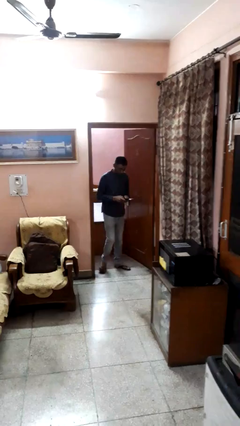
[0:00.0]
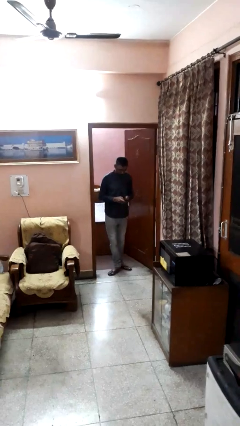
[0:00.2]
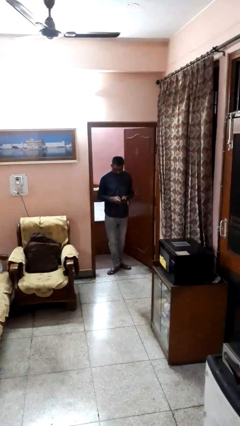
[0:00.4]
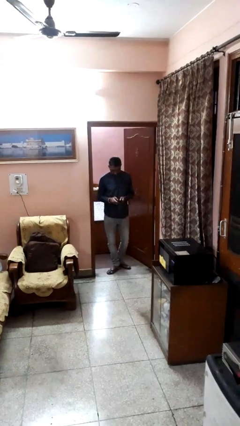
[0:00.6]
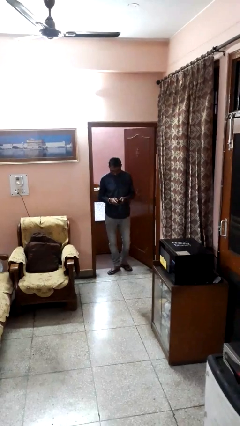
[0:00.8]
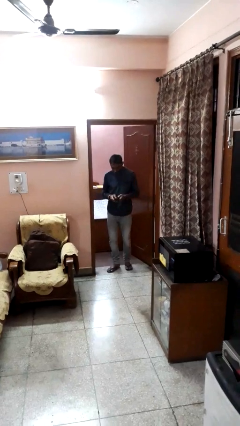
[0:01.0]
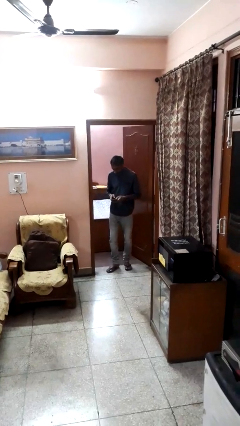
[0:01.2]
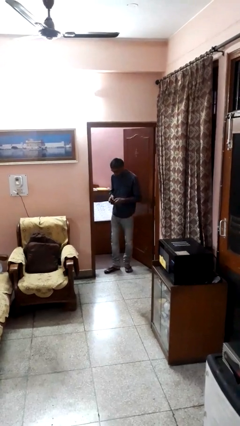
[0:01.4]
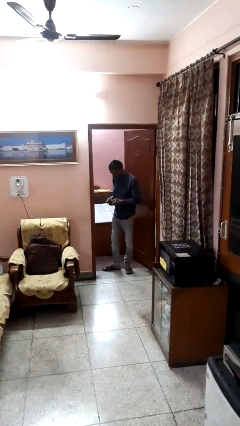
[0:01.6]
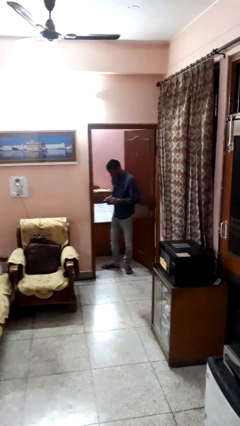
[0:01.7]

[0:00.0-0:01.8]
person enters scene through structure

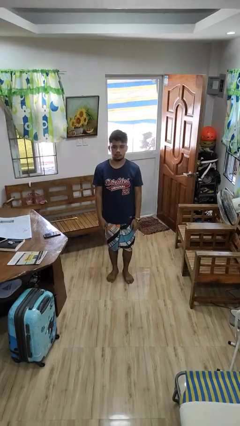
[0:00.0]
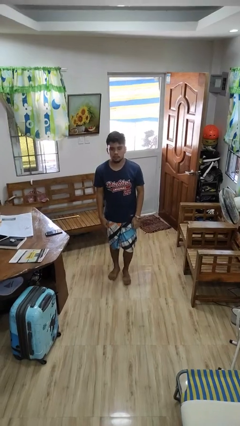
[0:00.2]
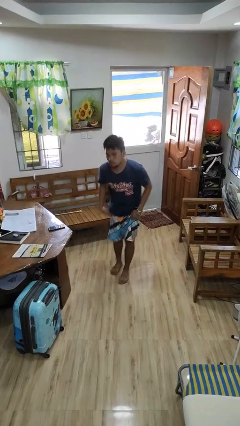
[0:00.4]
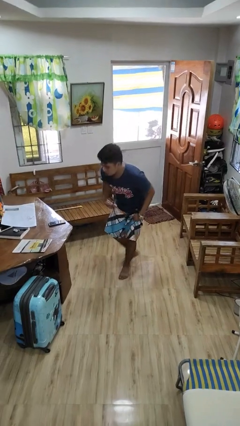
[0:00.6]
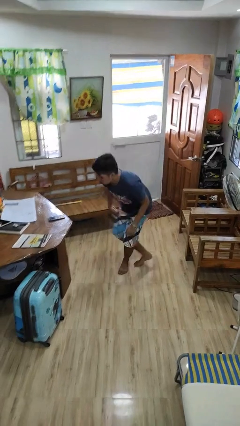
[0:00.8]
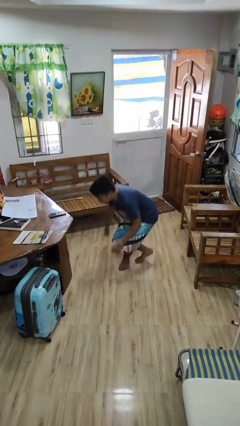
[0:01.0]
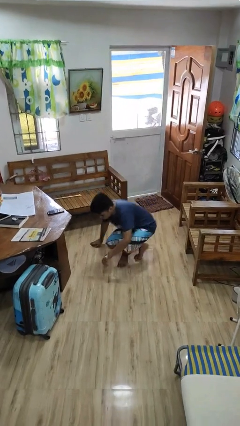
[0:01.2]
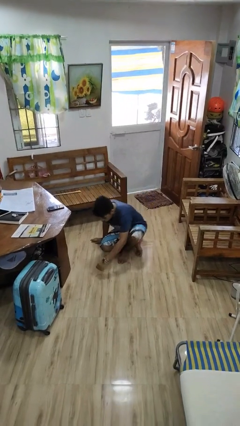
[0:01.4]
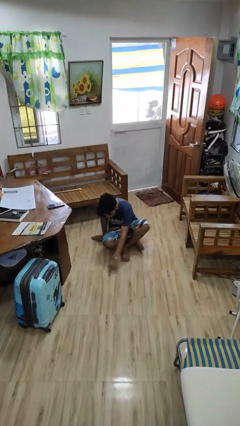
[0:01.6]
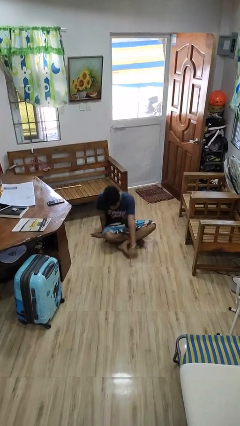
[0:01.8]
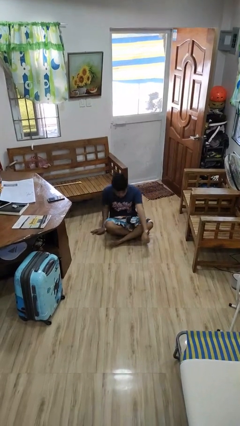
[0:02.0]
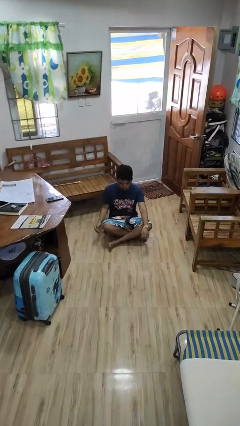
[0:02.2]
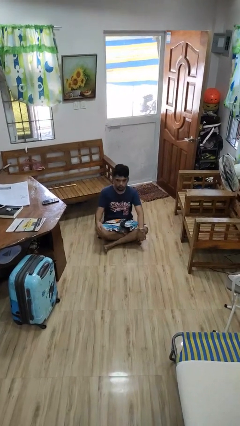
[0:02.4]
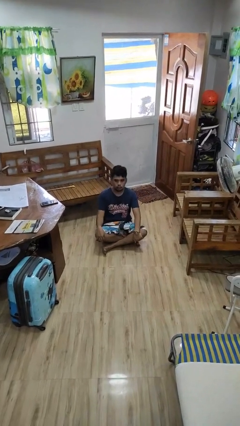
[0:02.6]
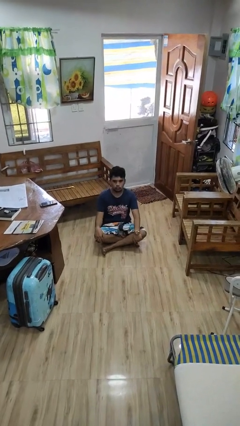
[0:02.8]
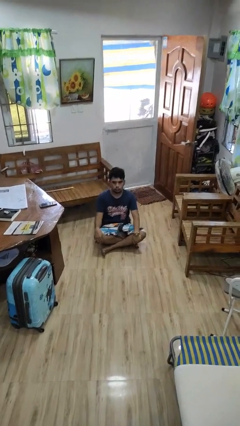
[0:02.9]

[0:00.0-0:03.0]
person sits crisscross

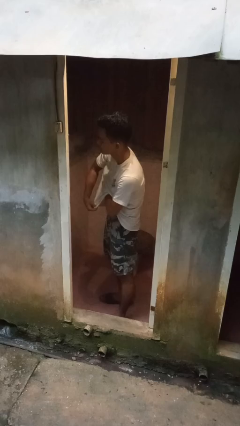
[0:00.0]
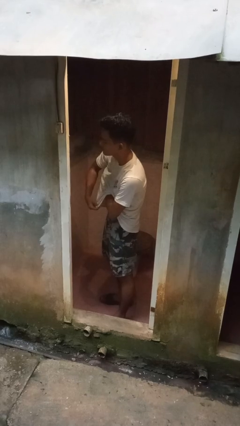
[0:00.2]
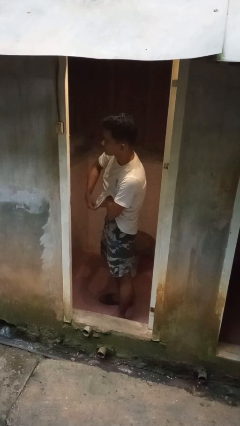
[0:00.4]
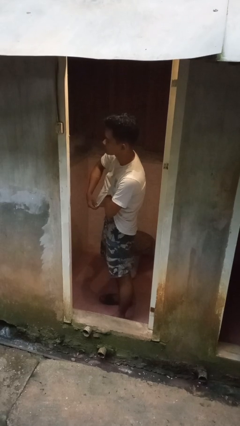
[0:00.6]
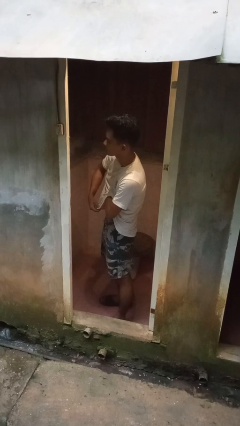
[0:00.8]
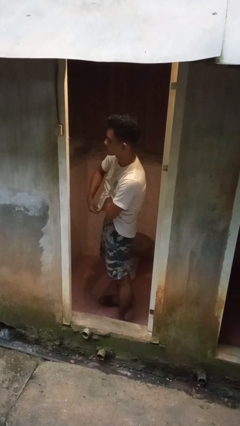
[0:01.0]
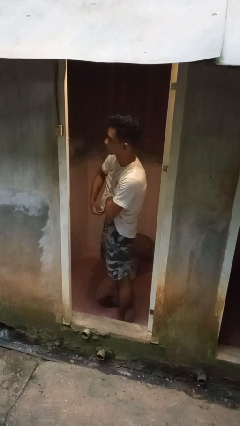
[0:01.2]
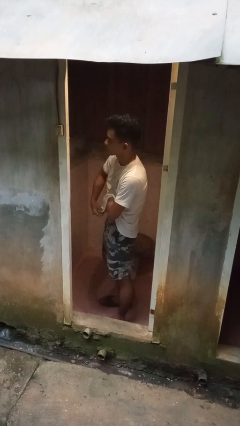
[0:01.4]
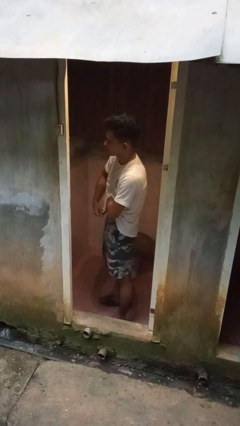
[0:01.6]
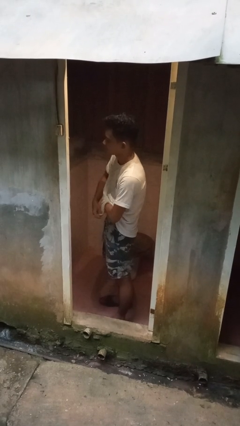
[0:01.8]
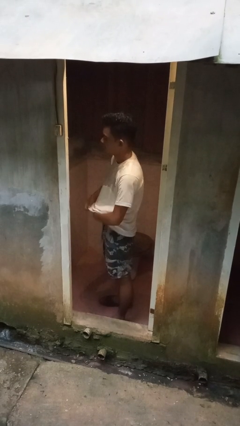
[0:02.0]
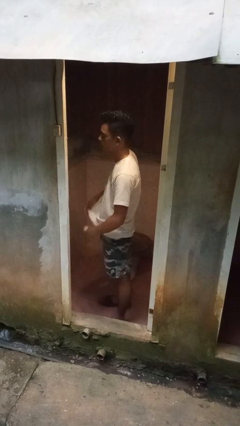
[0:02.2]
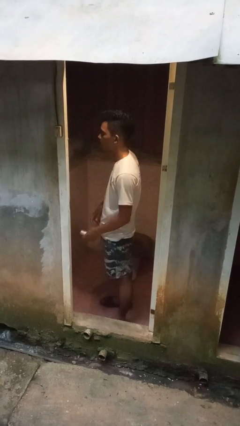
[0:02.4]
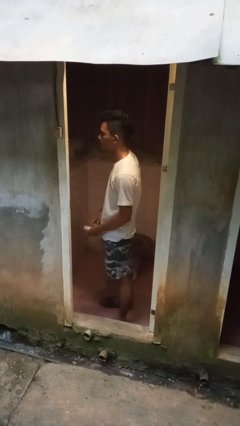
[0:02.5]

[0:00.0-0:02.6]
person applies deodorant

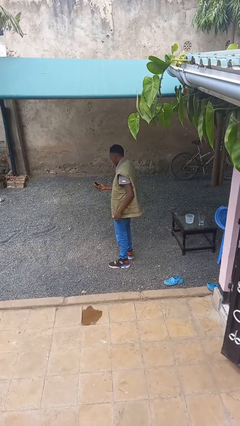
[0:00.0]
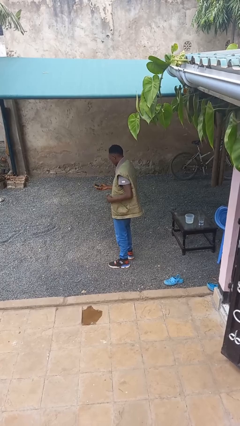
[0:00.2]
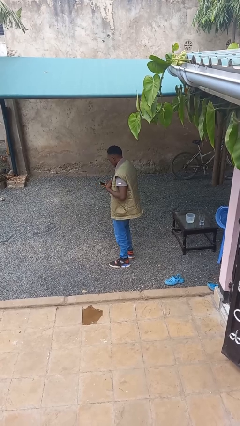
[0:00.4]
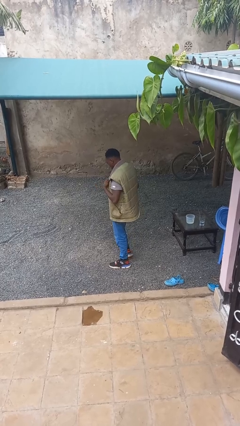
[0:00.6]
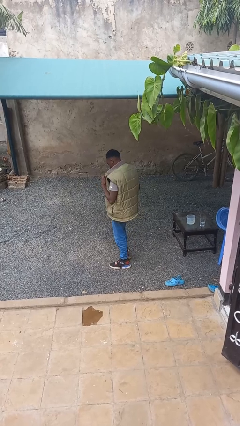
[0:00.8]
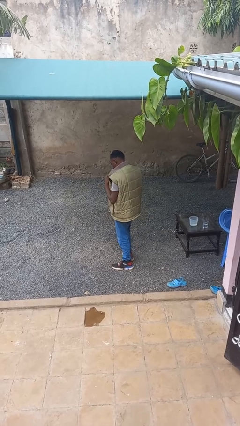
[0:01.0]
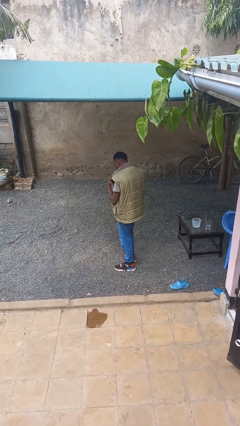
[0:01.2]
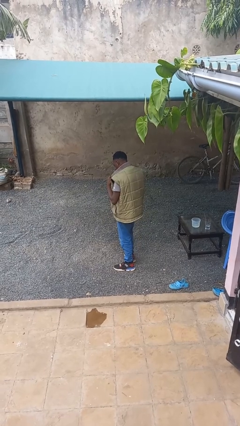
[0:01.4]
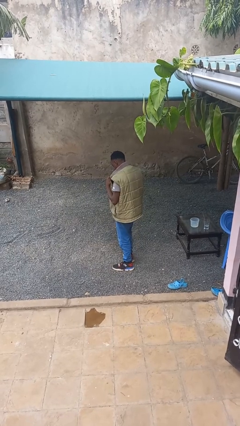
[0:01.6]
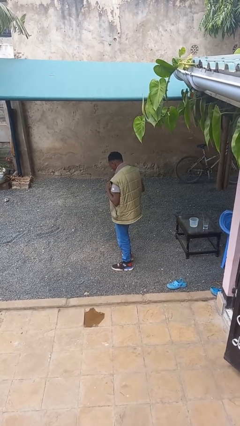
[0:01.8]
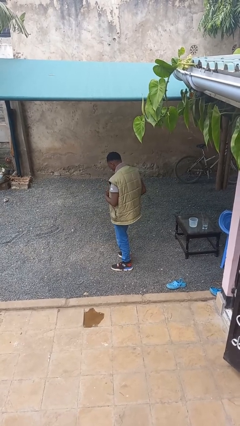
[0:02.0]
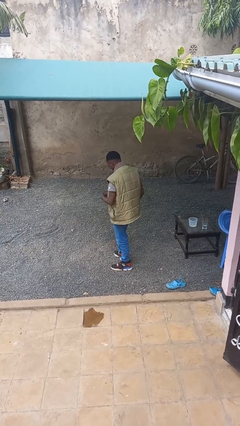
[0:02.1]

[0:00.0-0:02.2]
person puts phone into pocket

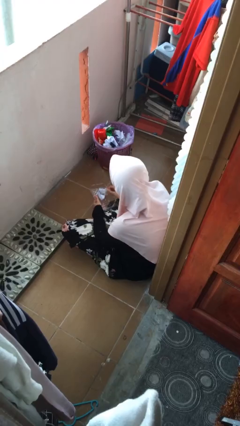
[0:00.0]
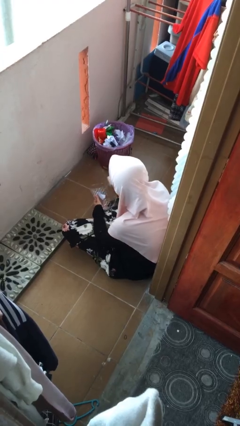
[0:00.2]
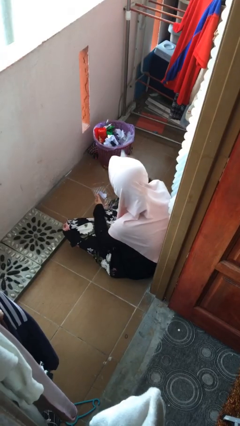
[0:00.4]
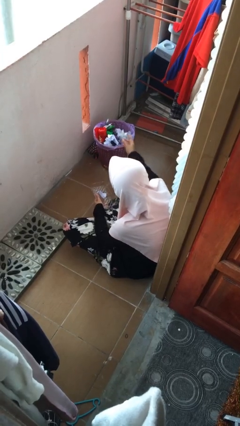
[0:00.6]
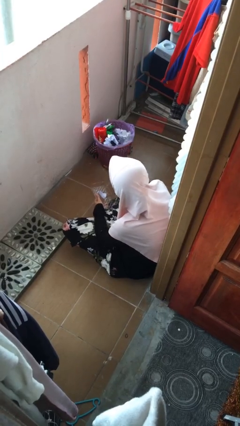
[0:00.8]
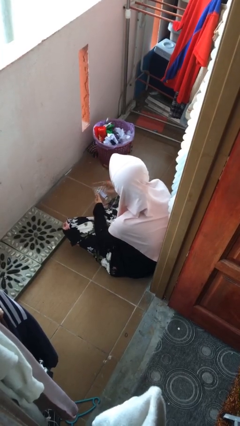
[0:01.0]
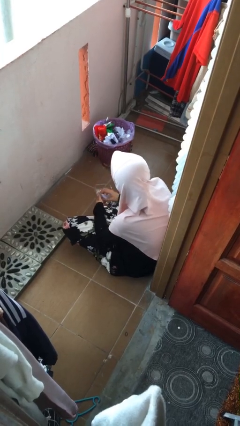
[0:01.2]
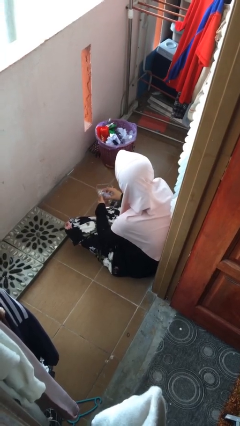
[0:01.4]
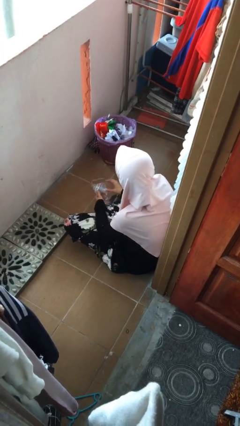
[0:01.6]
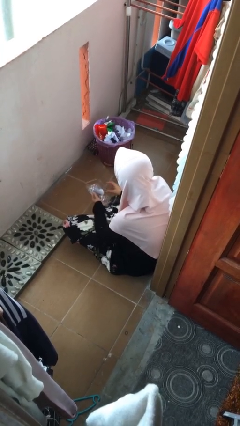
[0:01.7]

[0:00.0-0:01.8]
person discards trash

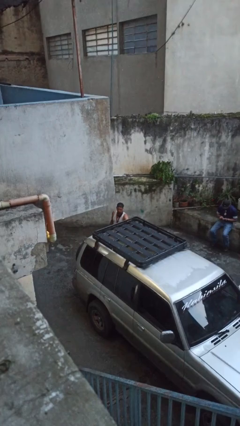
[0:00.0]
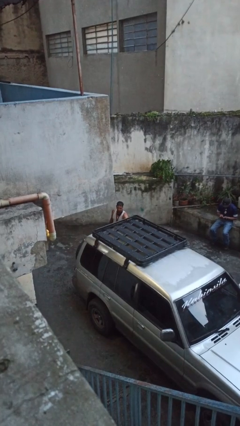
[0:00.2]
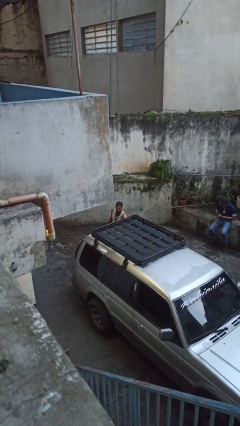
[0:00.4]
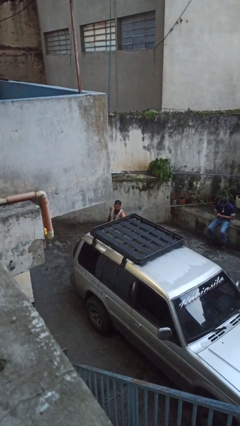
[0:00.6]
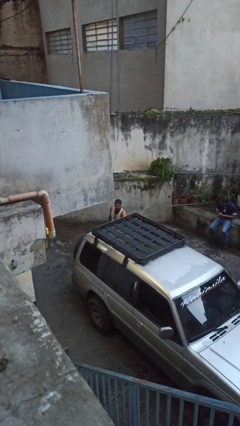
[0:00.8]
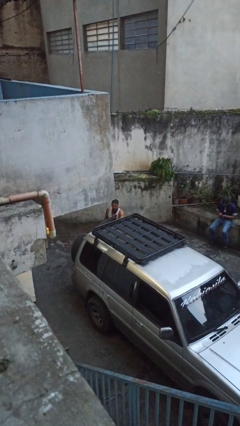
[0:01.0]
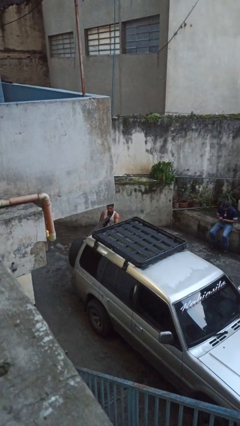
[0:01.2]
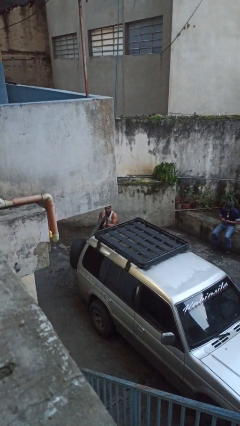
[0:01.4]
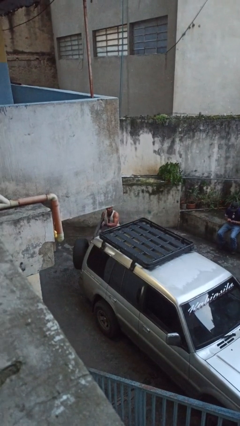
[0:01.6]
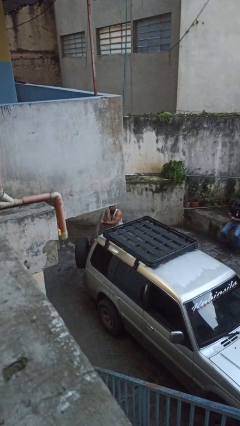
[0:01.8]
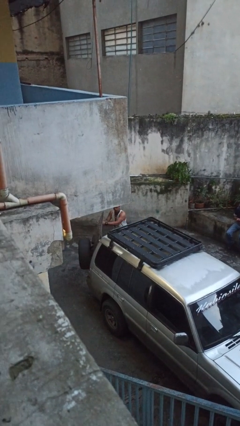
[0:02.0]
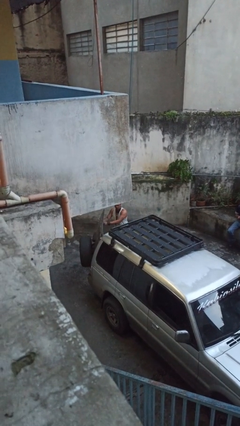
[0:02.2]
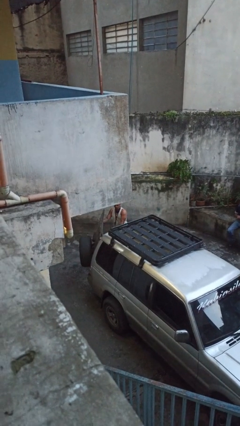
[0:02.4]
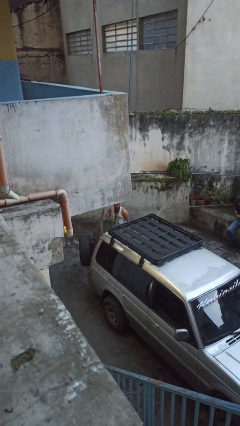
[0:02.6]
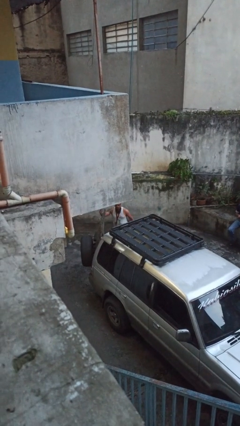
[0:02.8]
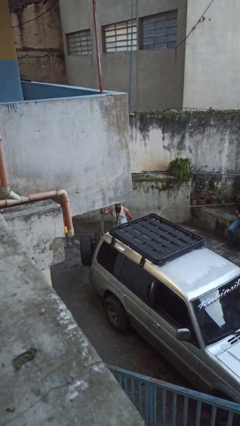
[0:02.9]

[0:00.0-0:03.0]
person opens car trunk

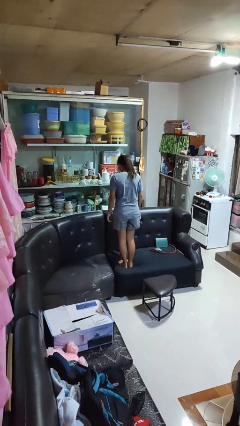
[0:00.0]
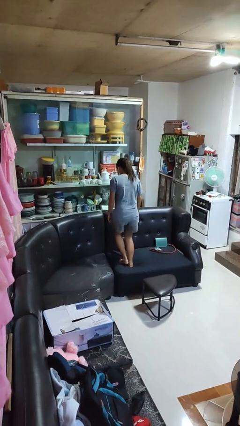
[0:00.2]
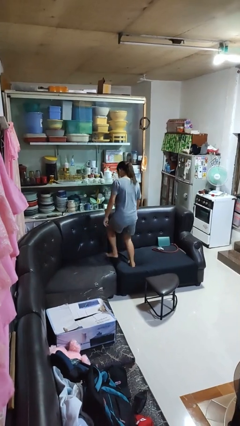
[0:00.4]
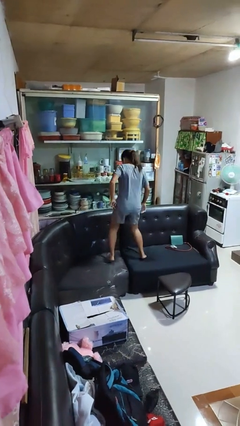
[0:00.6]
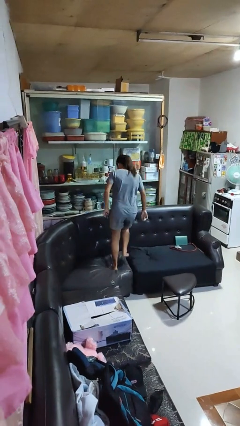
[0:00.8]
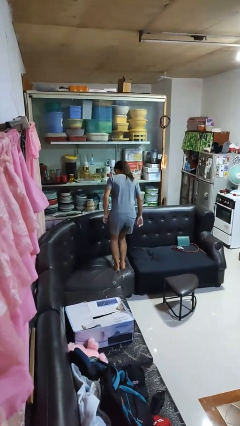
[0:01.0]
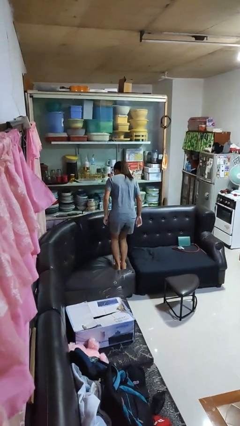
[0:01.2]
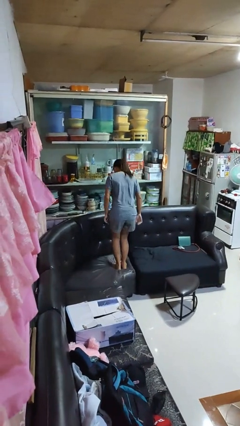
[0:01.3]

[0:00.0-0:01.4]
person jumps on couch

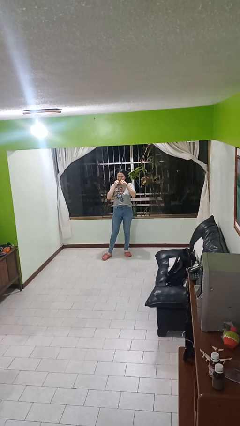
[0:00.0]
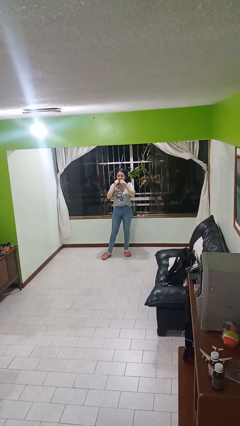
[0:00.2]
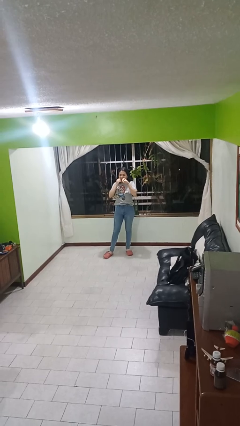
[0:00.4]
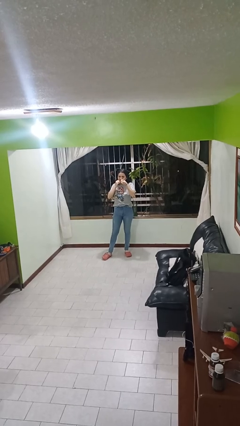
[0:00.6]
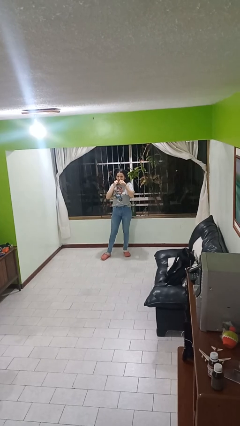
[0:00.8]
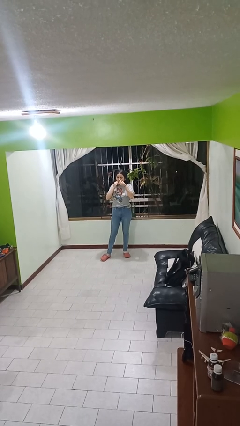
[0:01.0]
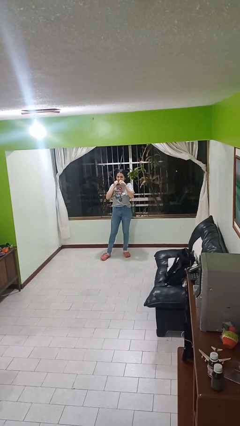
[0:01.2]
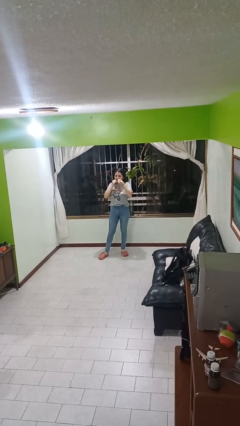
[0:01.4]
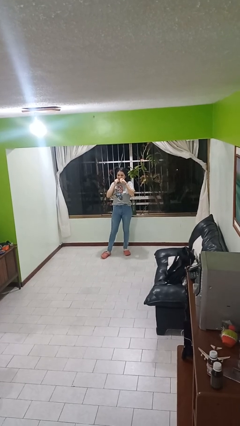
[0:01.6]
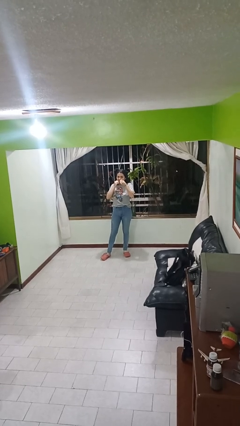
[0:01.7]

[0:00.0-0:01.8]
person flosses
